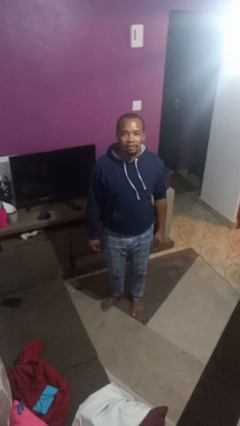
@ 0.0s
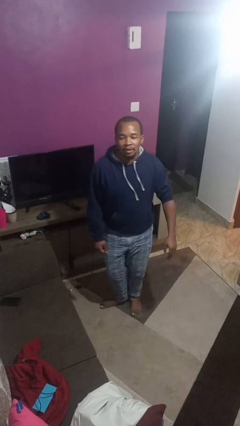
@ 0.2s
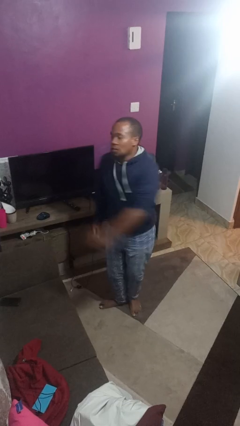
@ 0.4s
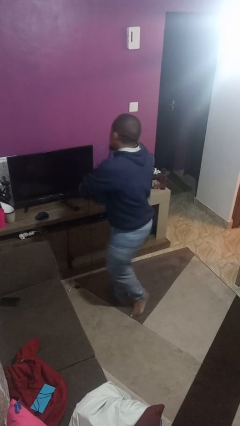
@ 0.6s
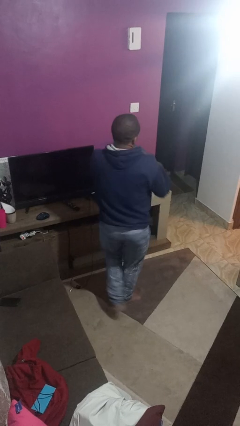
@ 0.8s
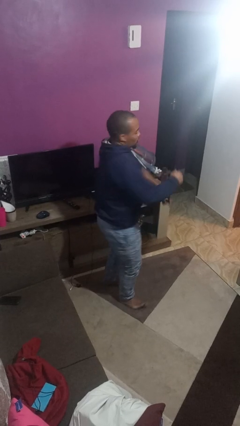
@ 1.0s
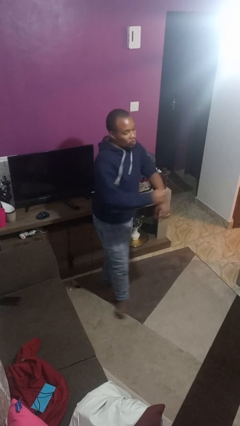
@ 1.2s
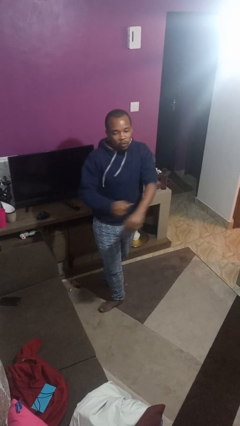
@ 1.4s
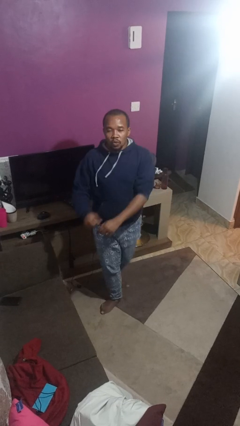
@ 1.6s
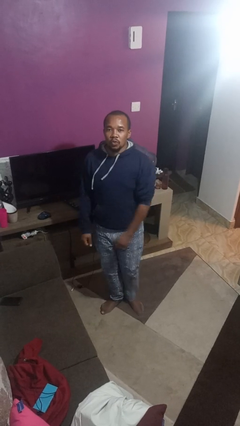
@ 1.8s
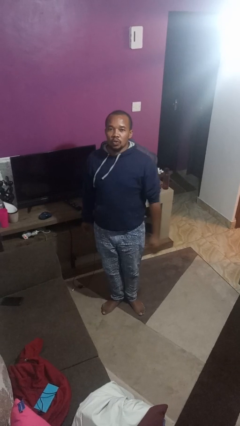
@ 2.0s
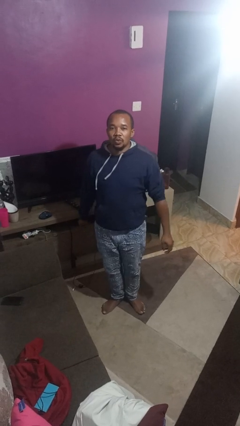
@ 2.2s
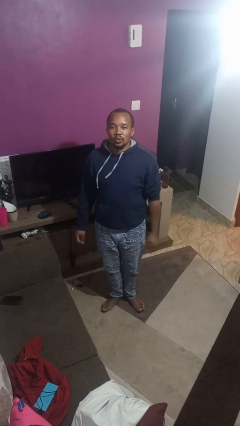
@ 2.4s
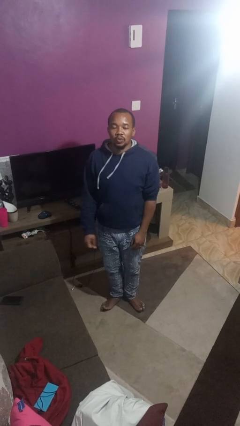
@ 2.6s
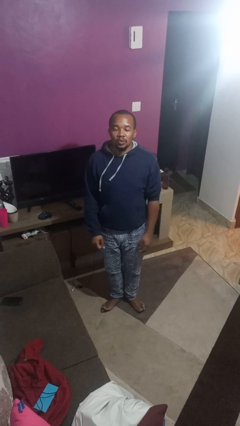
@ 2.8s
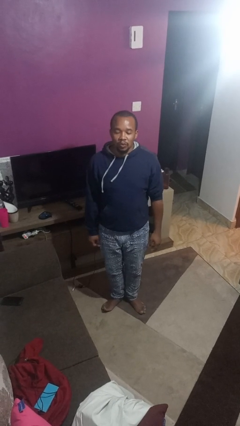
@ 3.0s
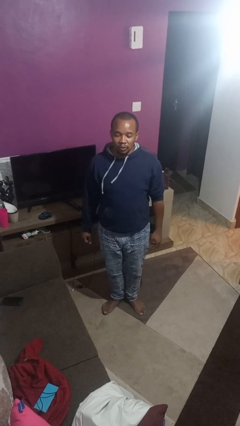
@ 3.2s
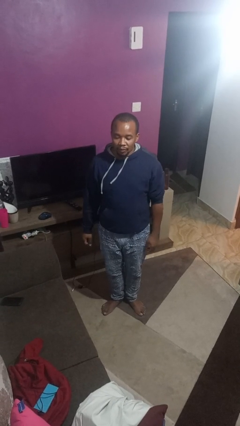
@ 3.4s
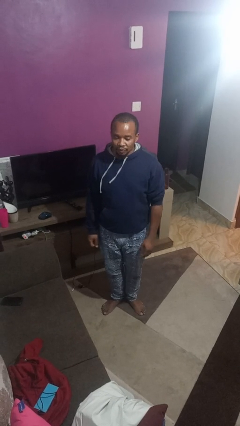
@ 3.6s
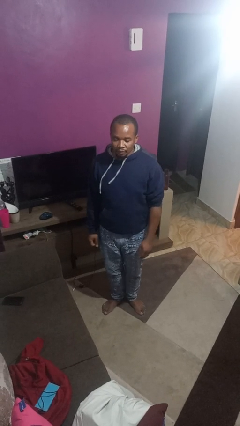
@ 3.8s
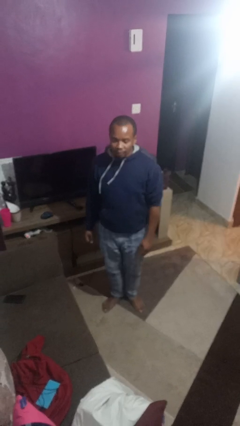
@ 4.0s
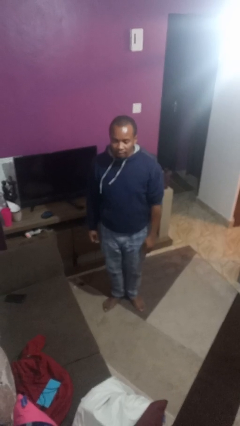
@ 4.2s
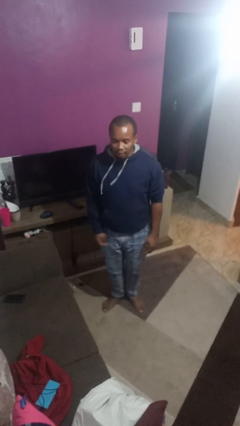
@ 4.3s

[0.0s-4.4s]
person twirls

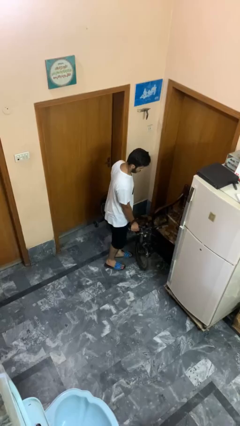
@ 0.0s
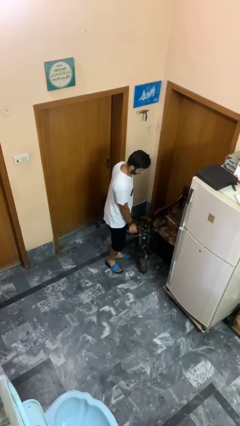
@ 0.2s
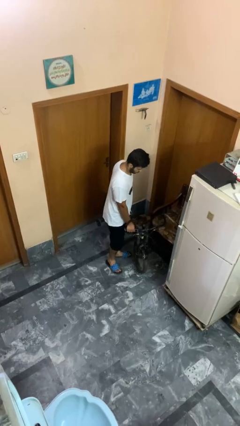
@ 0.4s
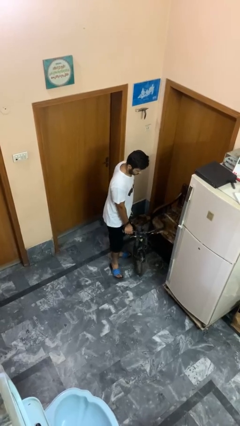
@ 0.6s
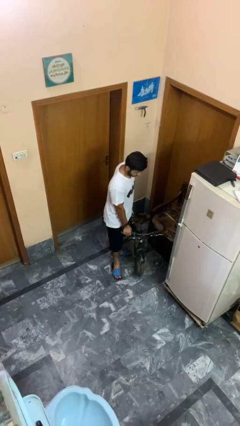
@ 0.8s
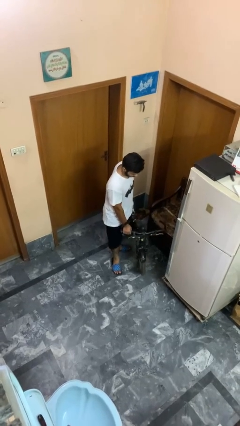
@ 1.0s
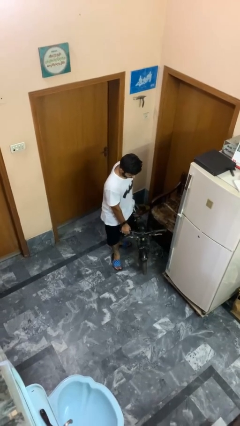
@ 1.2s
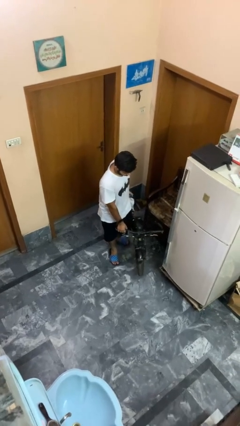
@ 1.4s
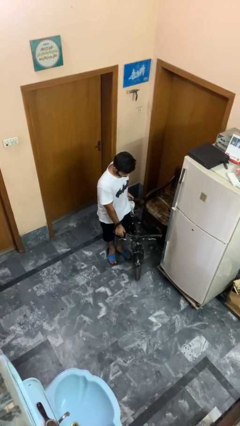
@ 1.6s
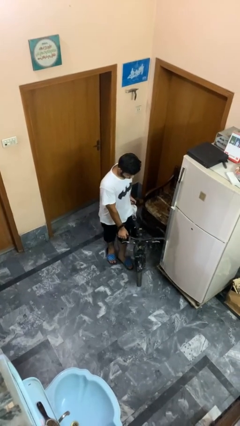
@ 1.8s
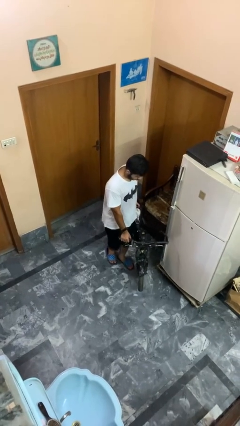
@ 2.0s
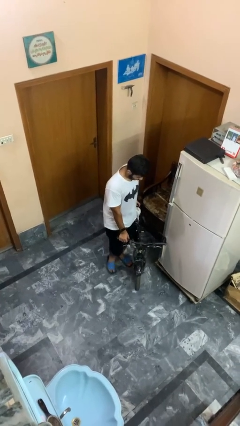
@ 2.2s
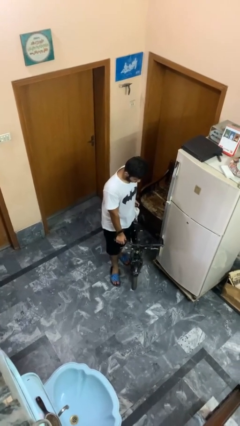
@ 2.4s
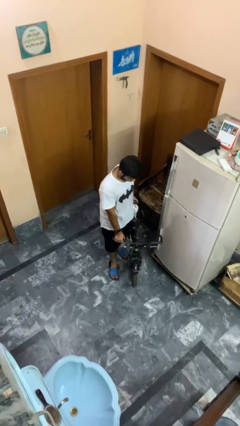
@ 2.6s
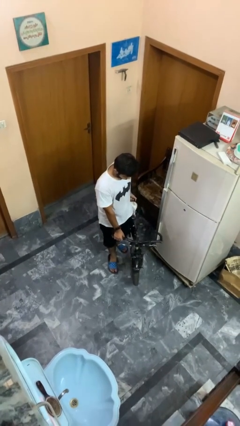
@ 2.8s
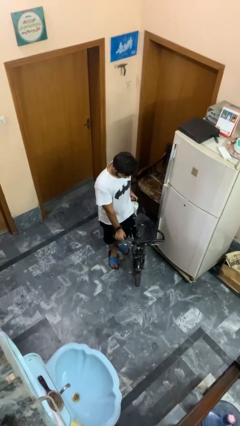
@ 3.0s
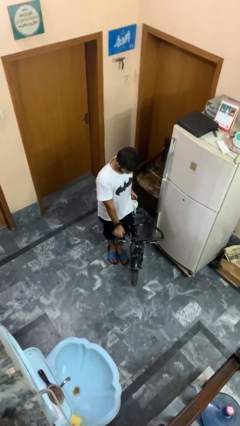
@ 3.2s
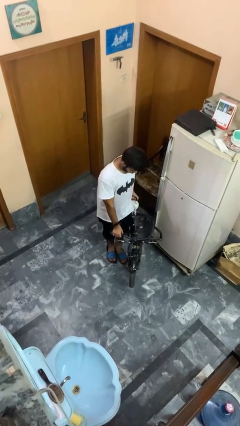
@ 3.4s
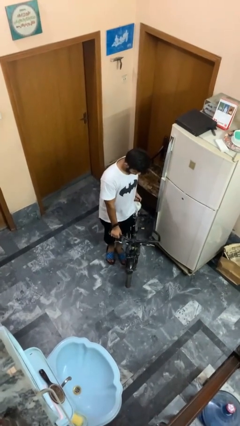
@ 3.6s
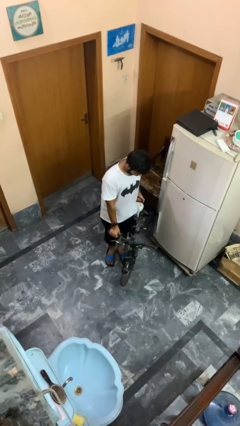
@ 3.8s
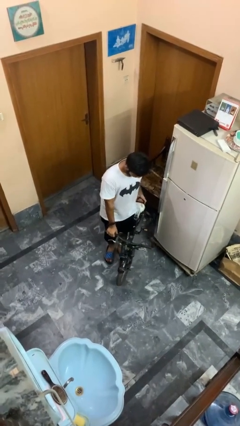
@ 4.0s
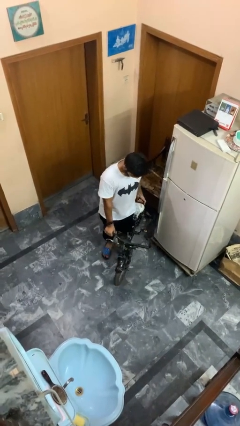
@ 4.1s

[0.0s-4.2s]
person carries bicycle

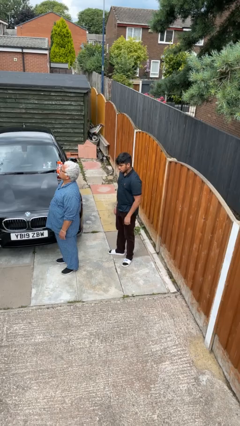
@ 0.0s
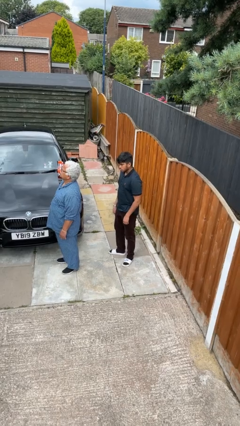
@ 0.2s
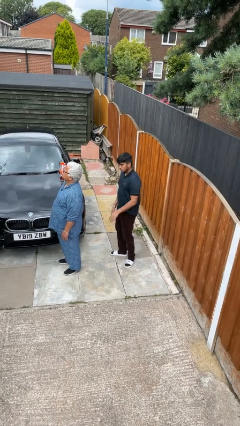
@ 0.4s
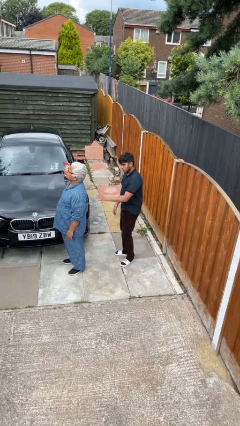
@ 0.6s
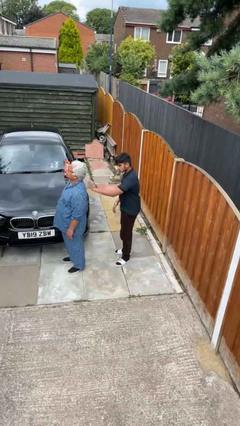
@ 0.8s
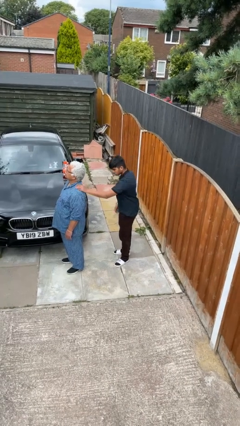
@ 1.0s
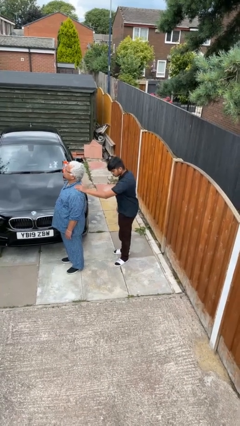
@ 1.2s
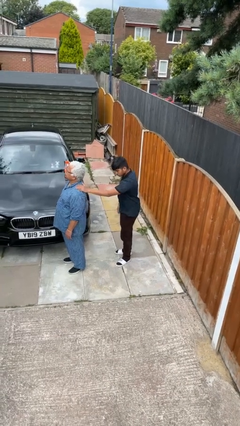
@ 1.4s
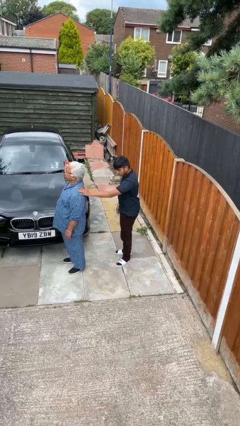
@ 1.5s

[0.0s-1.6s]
person touches back of person

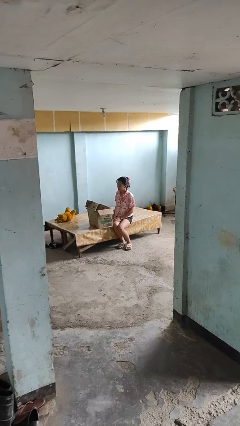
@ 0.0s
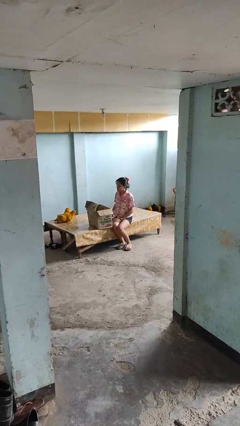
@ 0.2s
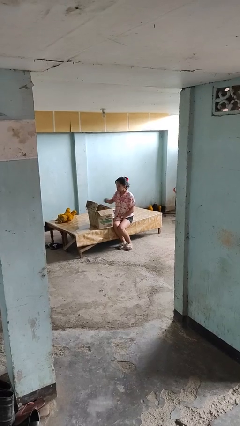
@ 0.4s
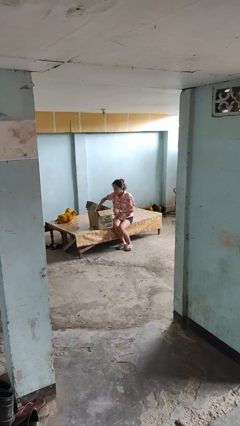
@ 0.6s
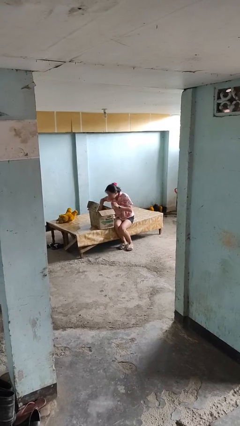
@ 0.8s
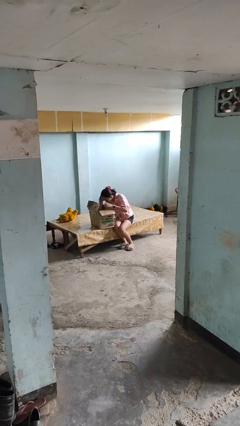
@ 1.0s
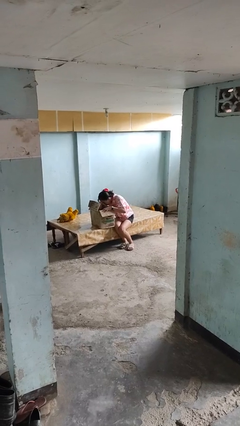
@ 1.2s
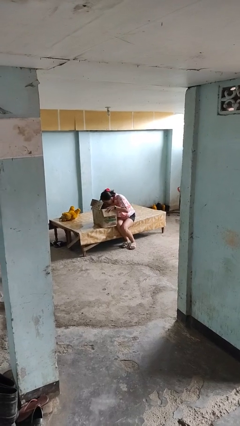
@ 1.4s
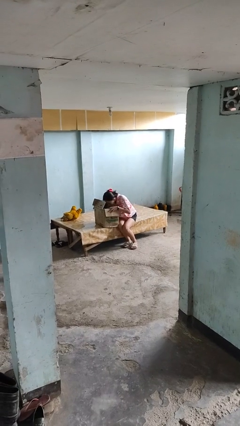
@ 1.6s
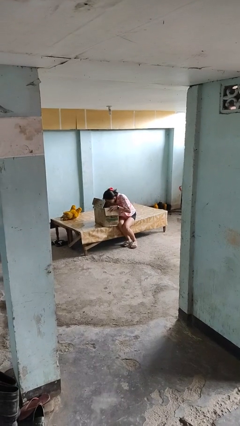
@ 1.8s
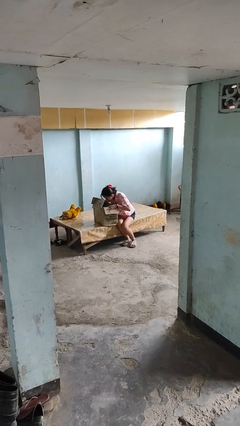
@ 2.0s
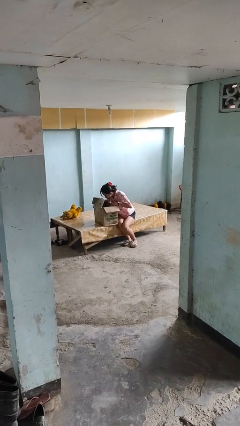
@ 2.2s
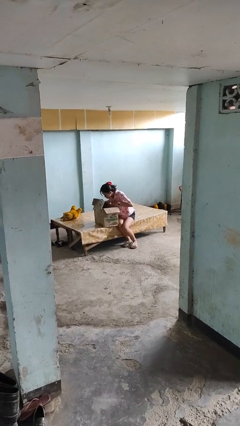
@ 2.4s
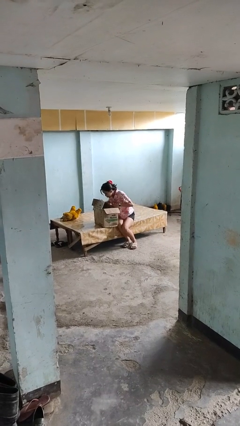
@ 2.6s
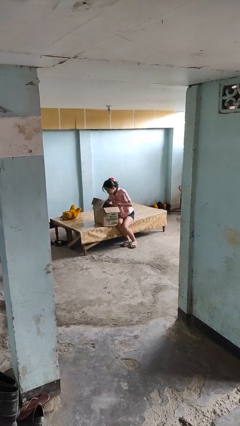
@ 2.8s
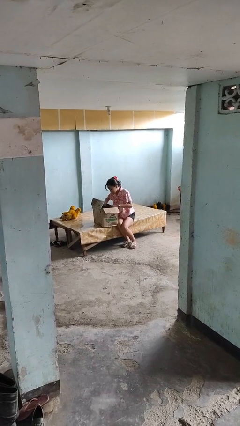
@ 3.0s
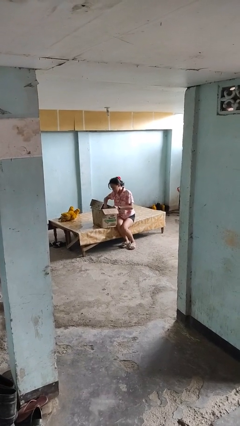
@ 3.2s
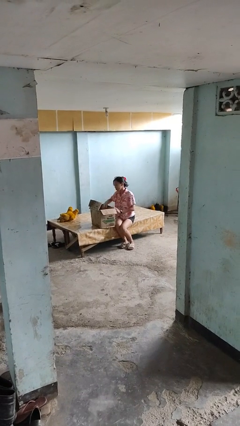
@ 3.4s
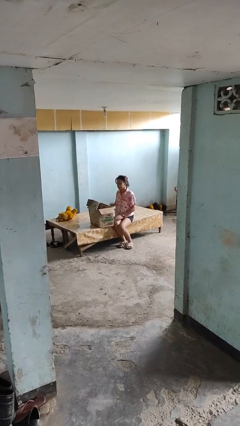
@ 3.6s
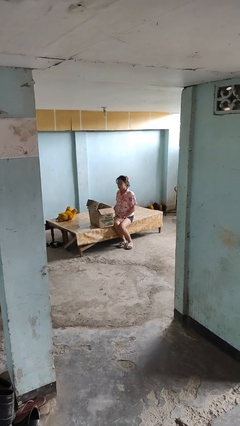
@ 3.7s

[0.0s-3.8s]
person searches in box

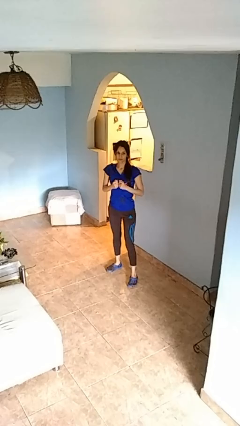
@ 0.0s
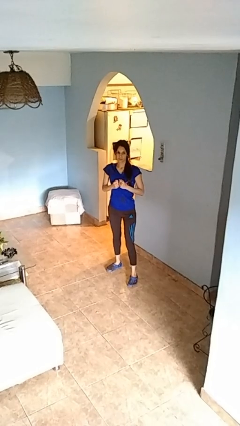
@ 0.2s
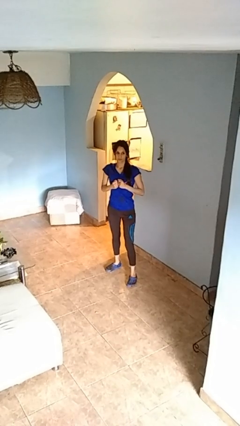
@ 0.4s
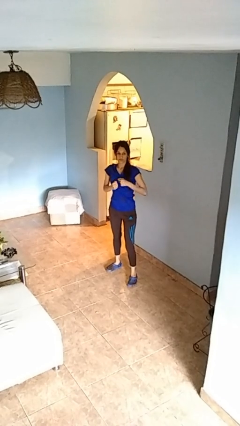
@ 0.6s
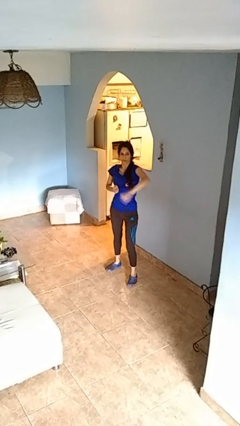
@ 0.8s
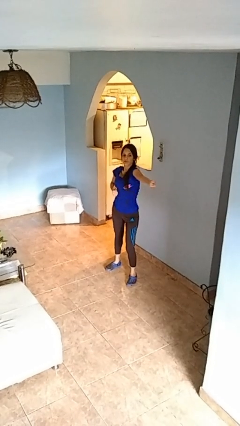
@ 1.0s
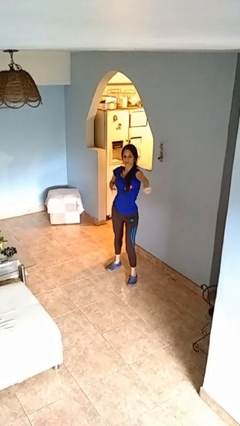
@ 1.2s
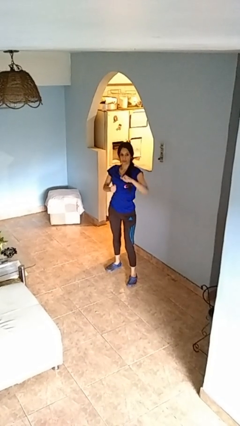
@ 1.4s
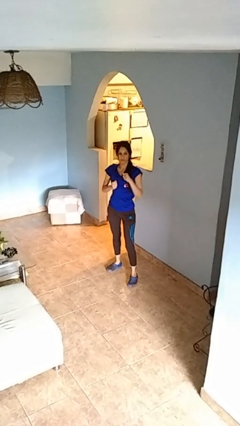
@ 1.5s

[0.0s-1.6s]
person punches

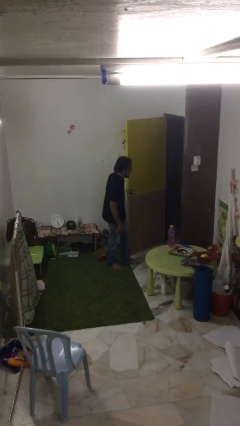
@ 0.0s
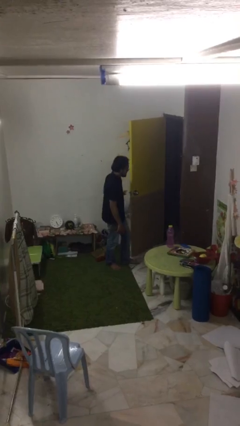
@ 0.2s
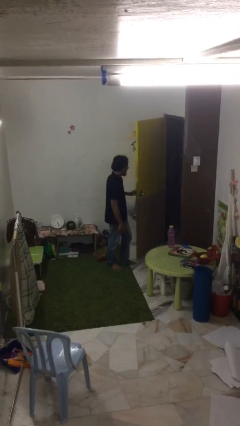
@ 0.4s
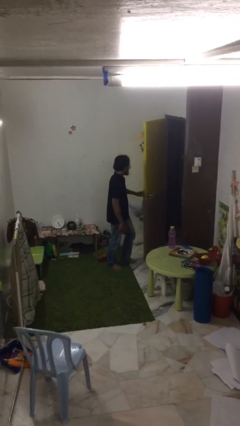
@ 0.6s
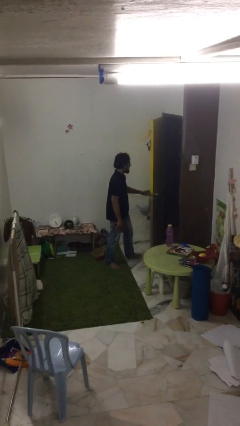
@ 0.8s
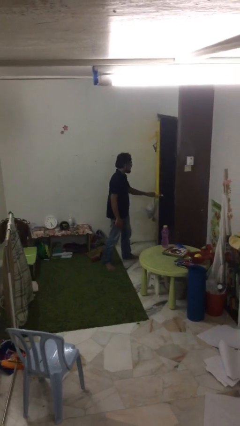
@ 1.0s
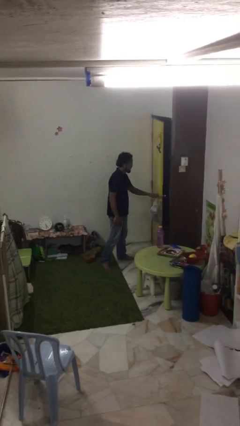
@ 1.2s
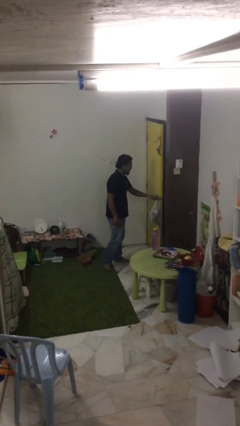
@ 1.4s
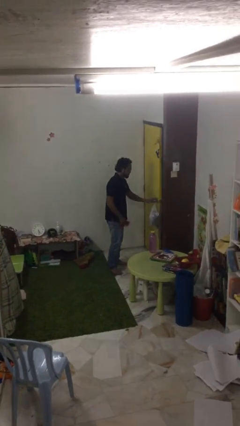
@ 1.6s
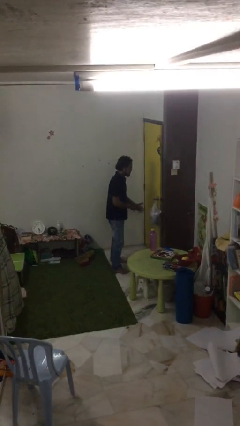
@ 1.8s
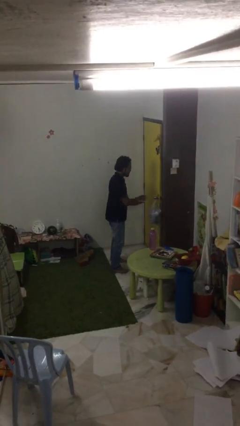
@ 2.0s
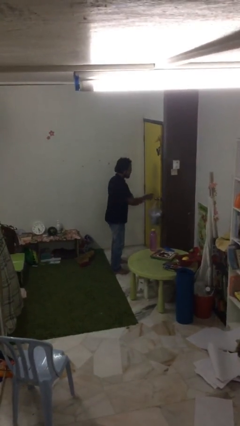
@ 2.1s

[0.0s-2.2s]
person closes facility door
